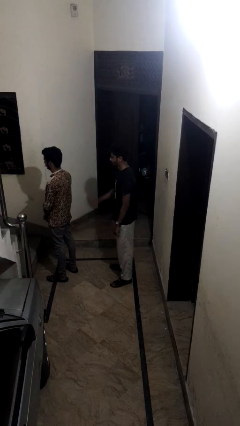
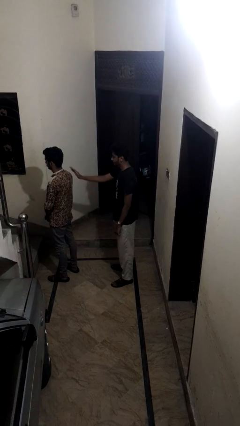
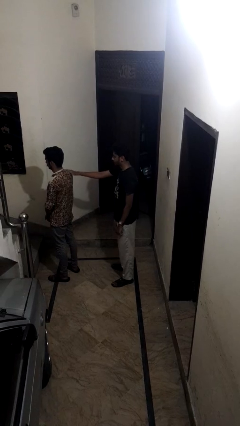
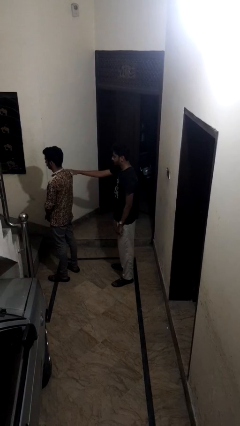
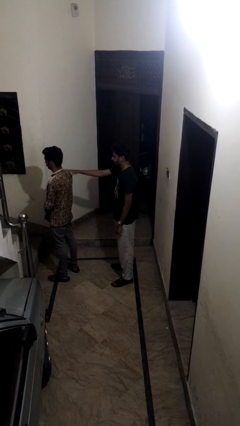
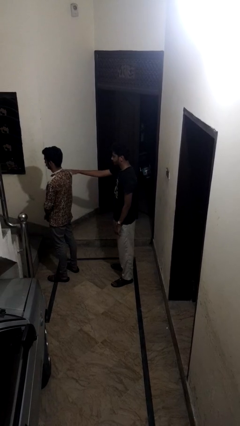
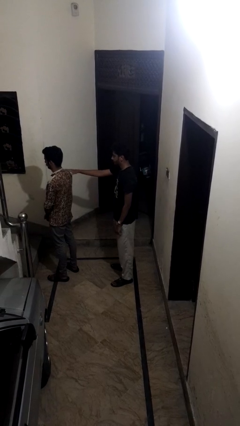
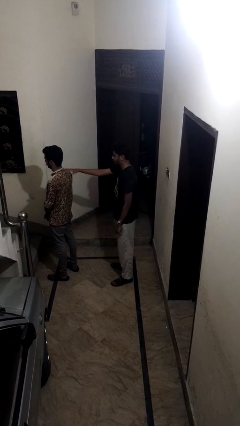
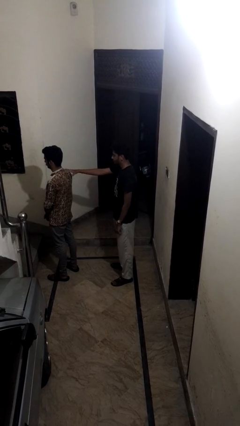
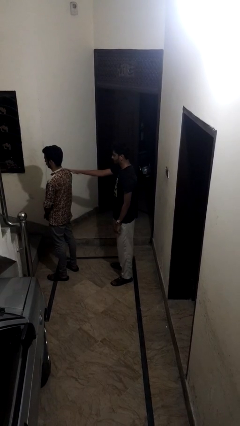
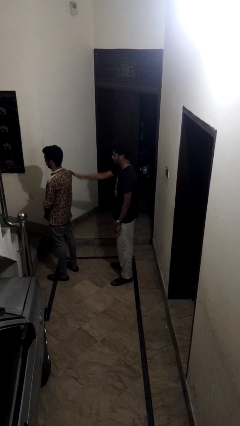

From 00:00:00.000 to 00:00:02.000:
person touches back of person

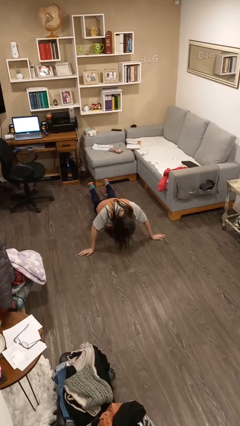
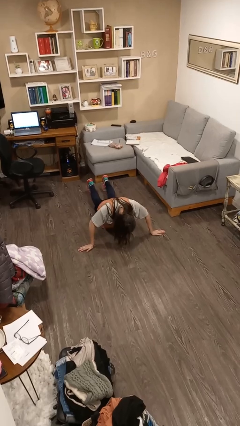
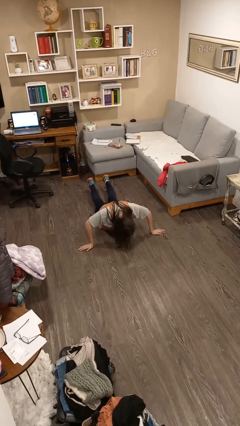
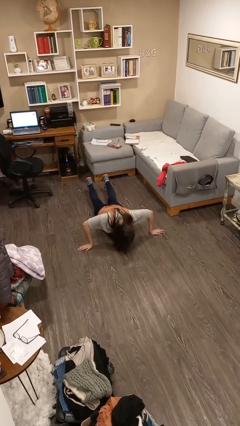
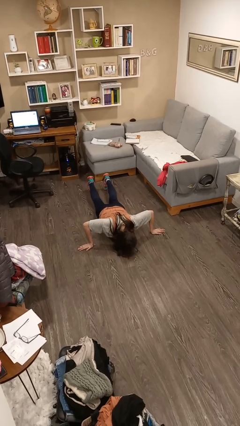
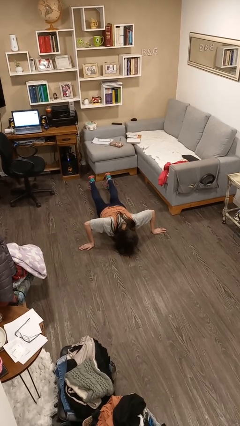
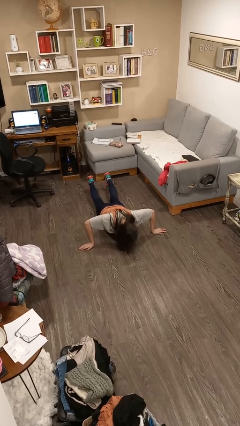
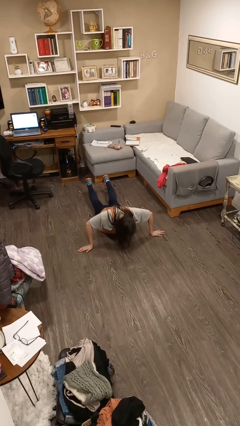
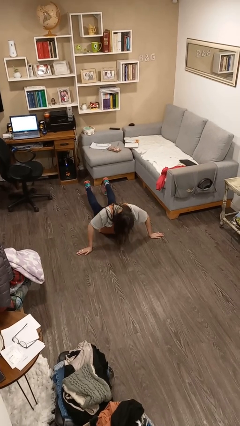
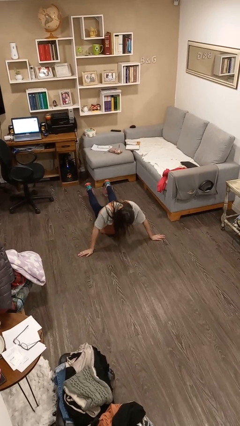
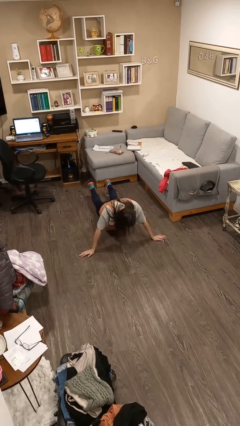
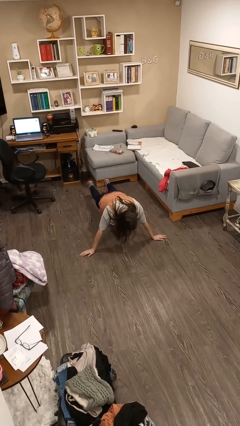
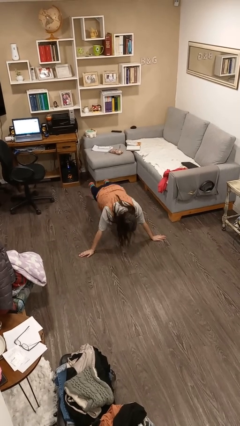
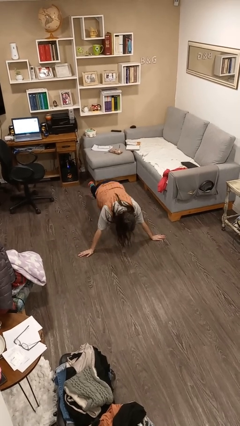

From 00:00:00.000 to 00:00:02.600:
person exercises with pushup

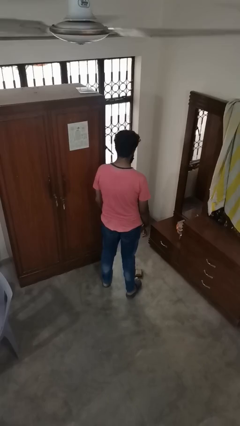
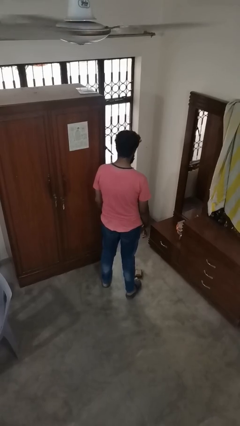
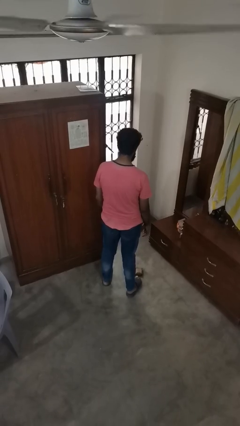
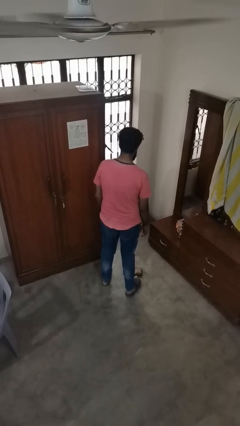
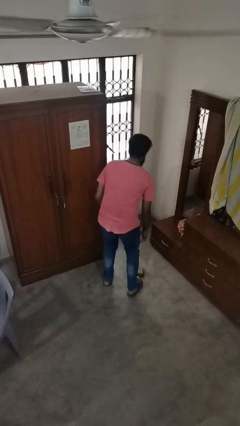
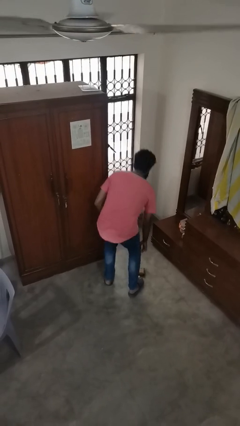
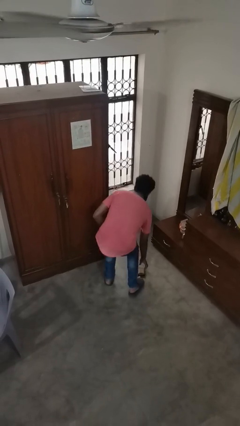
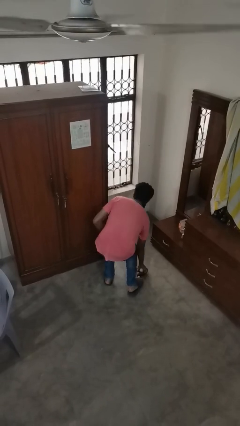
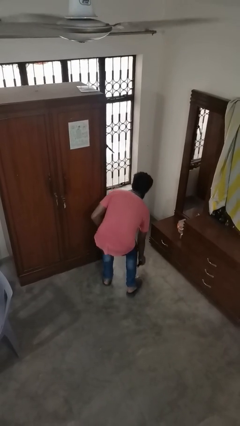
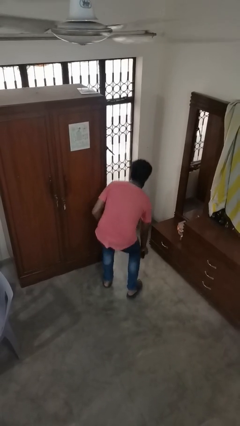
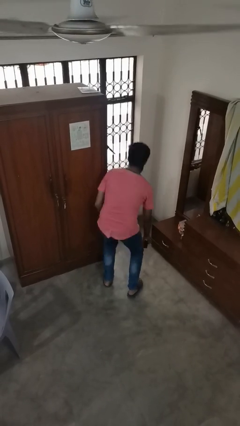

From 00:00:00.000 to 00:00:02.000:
person picks up object from floor

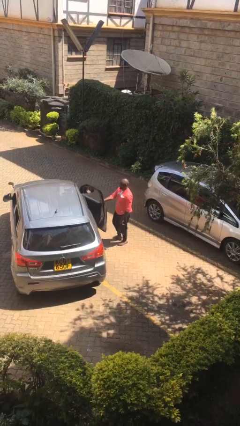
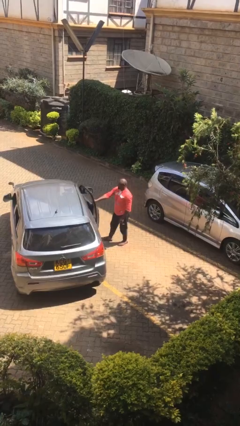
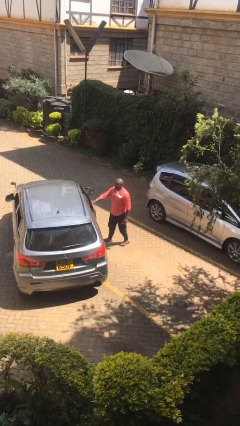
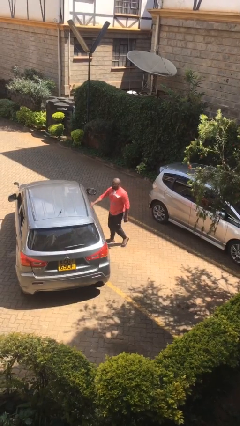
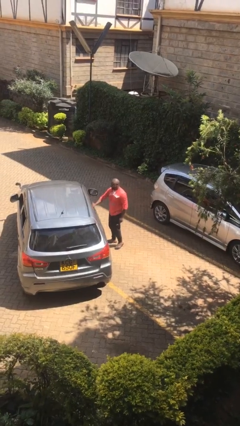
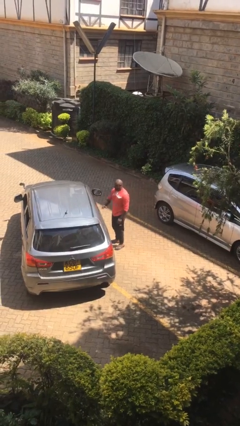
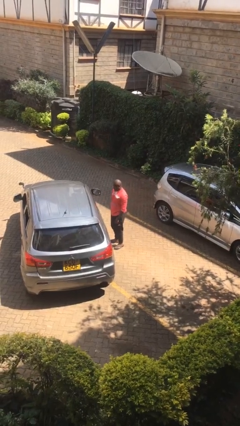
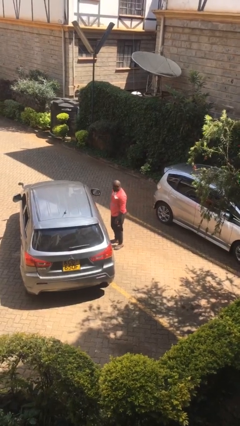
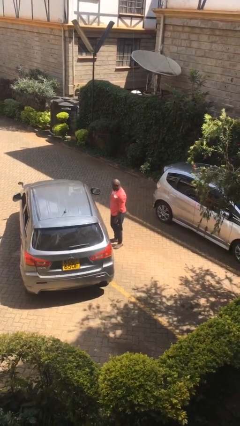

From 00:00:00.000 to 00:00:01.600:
person closes car door

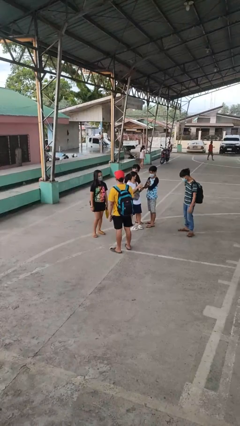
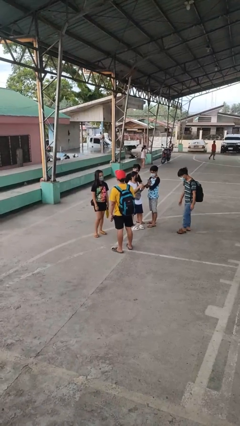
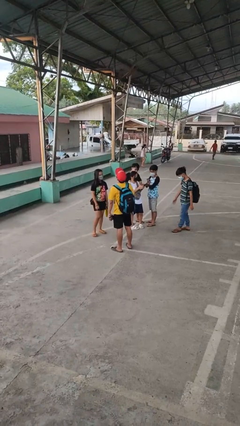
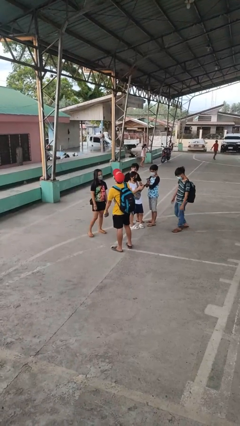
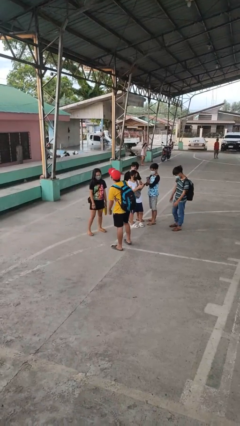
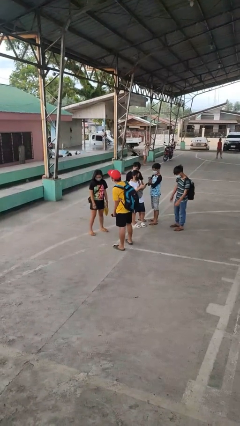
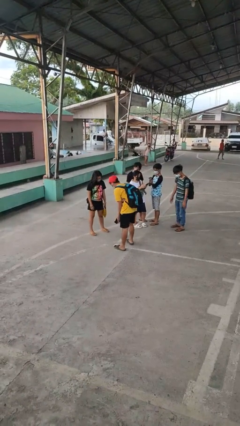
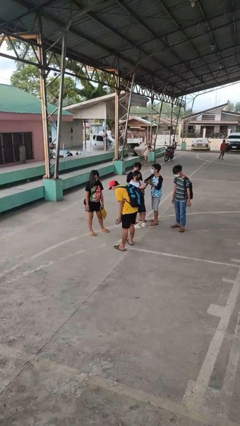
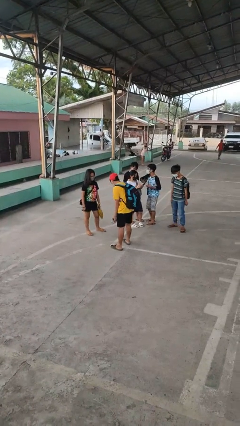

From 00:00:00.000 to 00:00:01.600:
person laughs with person

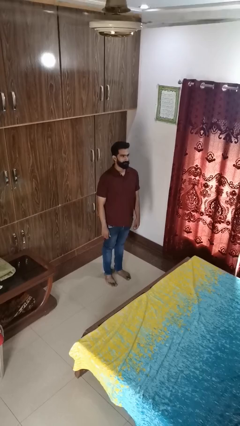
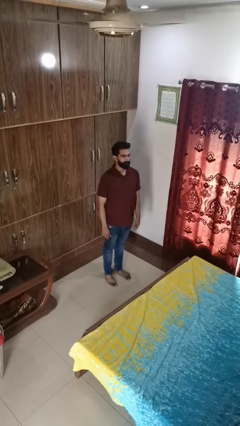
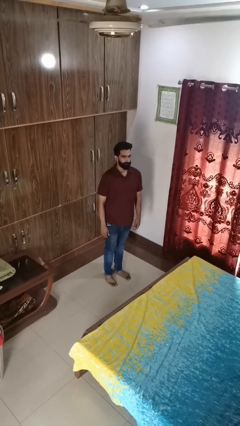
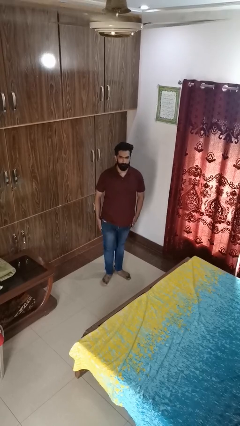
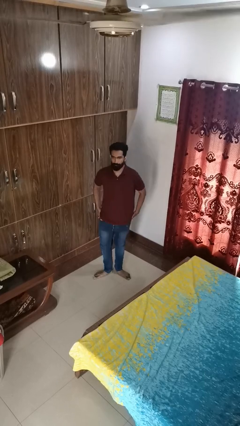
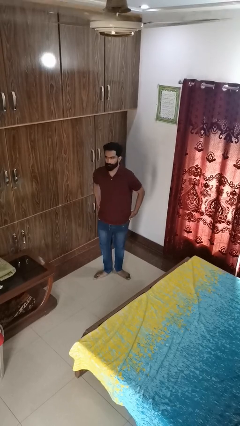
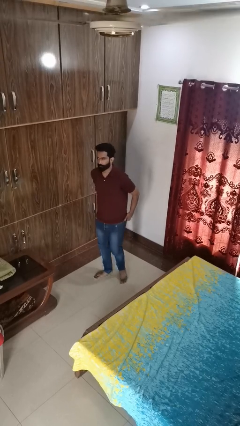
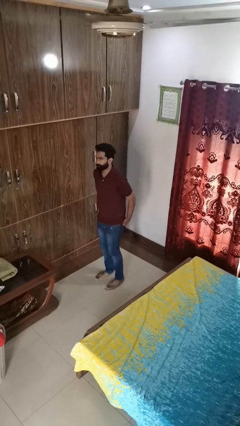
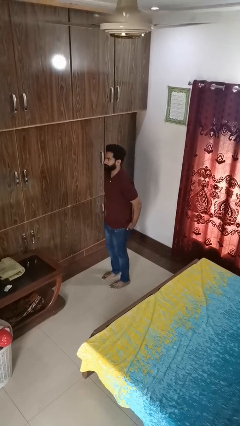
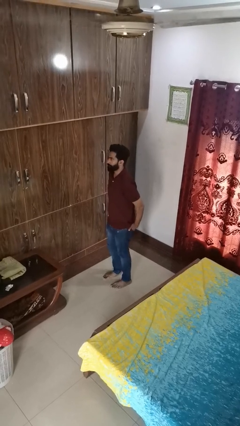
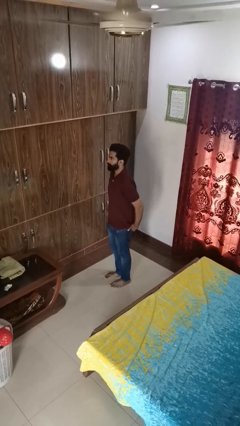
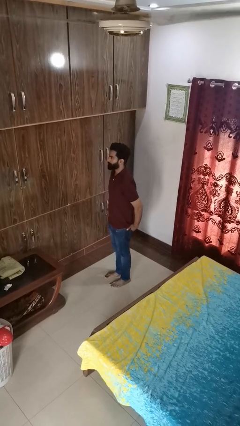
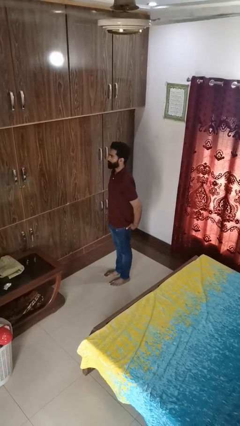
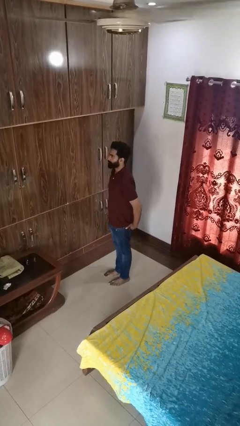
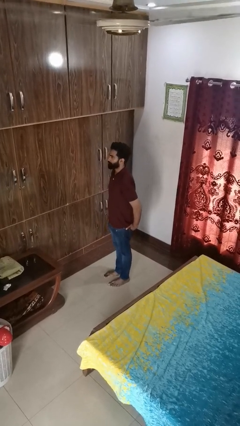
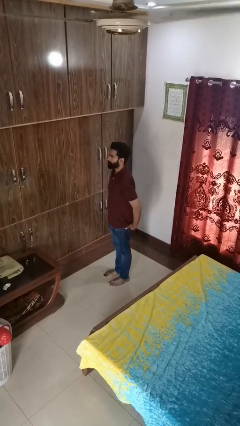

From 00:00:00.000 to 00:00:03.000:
person puts hands in back pockets

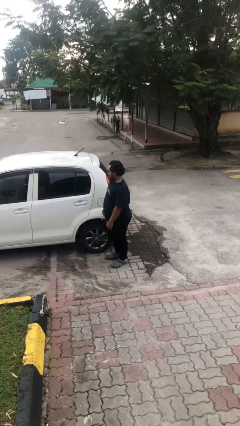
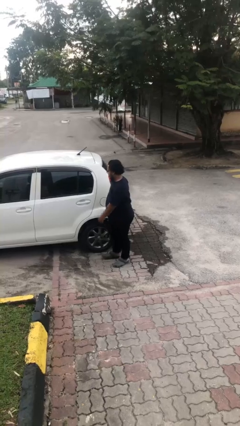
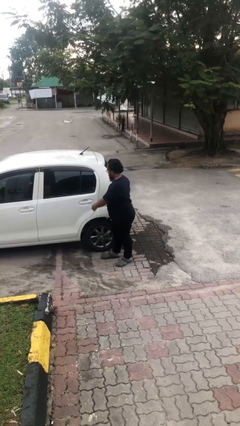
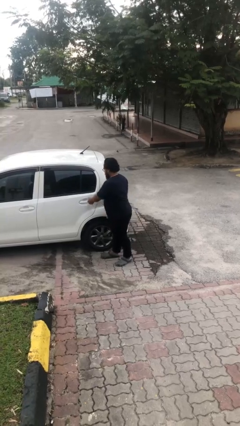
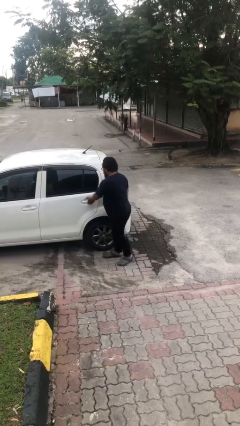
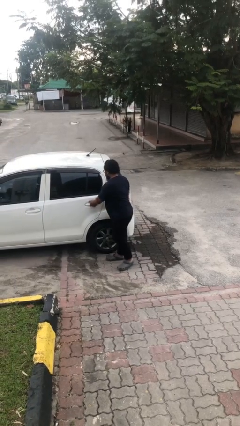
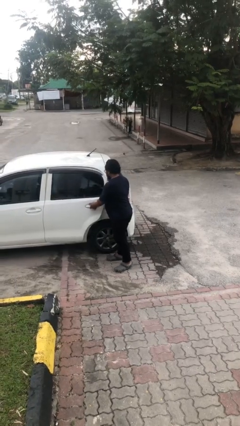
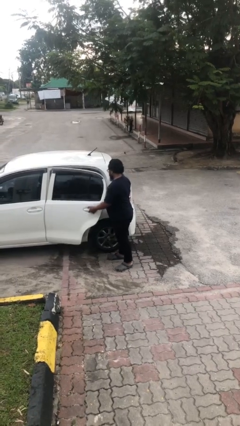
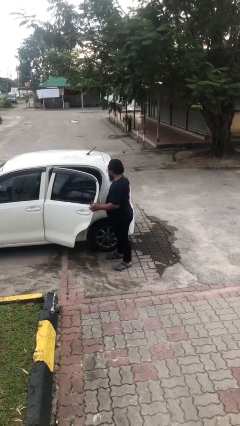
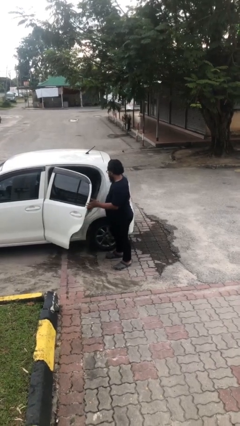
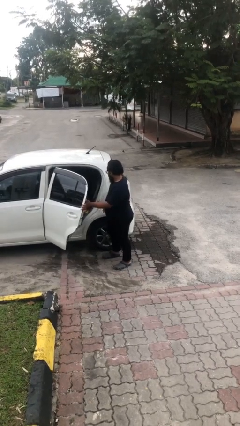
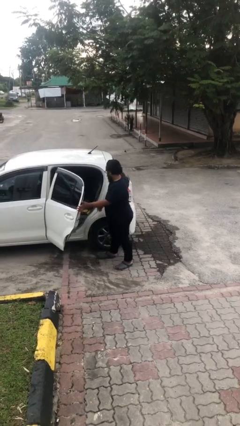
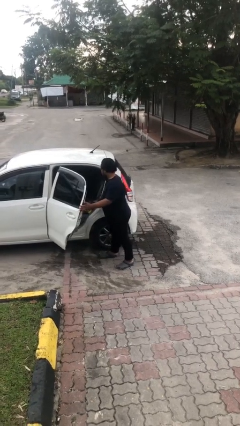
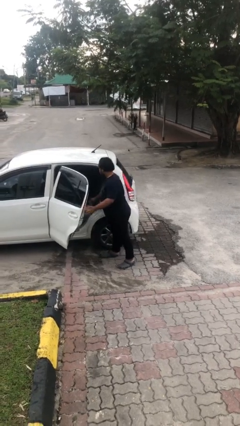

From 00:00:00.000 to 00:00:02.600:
person opens car door

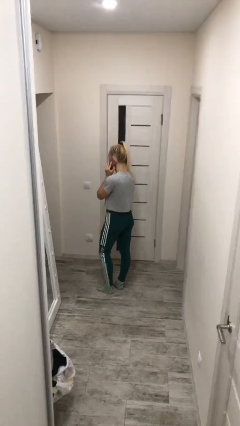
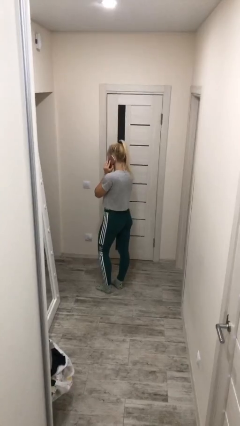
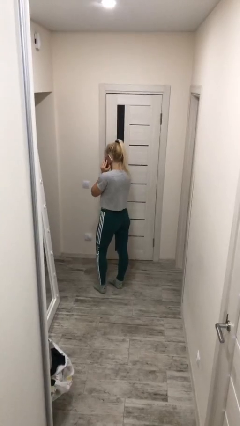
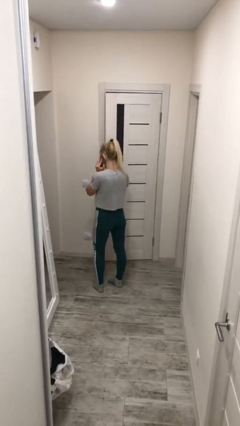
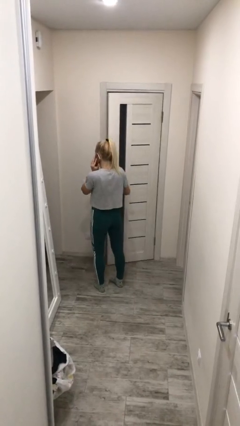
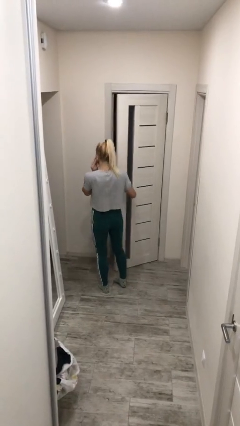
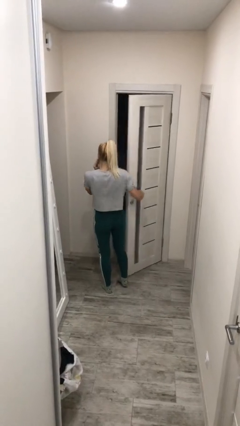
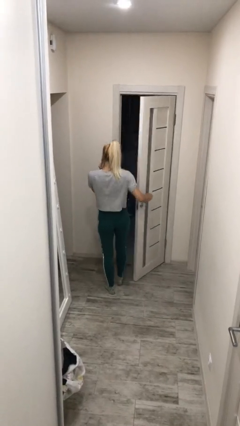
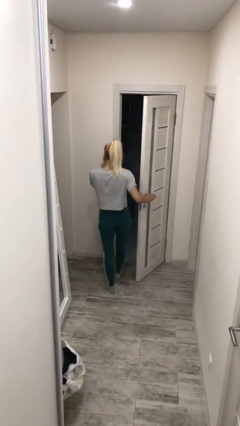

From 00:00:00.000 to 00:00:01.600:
person opens facility door
